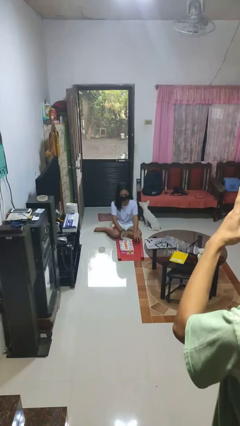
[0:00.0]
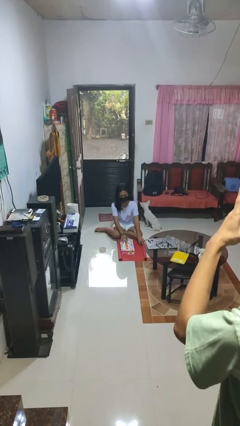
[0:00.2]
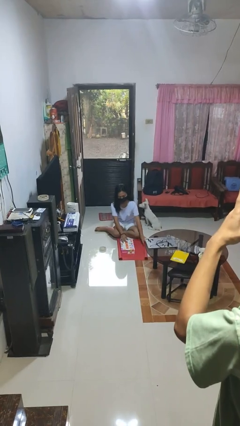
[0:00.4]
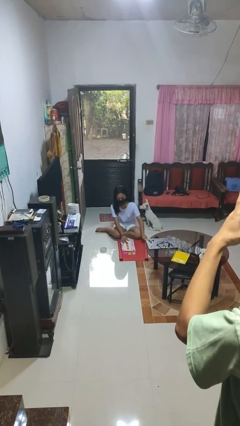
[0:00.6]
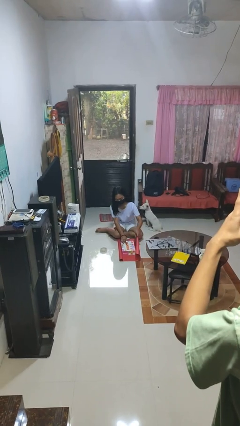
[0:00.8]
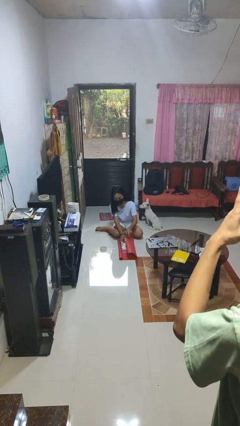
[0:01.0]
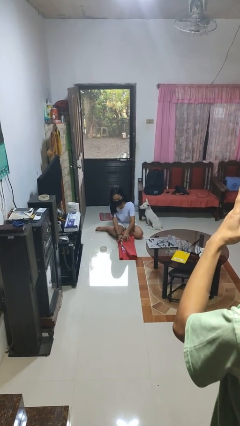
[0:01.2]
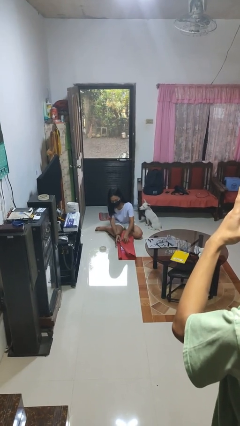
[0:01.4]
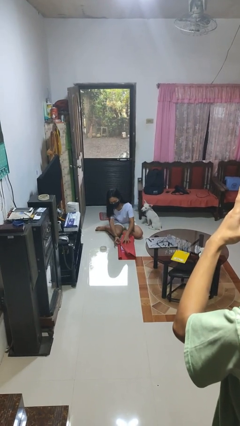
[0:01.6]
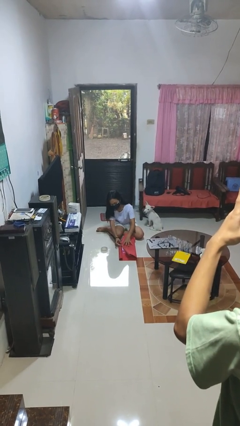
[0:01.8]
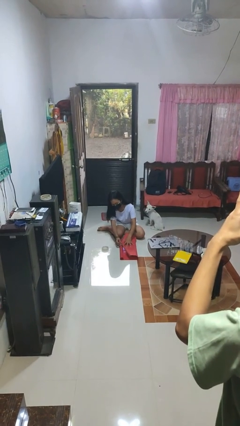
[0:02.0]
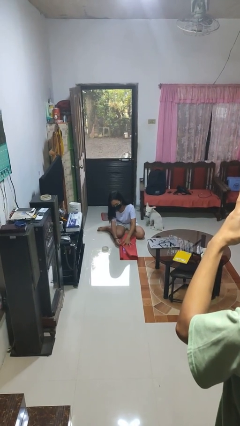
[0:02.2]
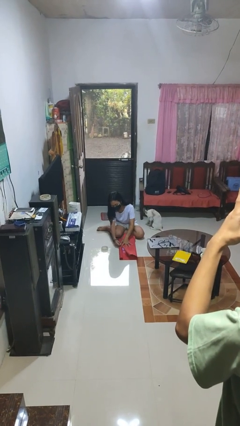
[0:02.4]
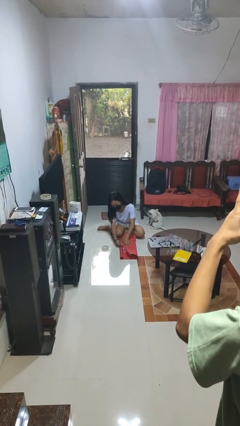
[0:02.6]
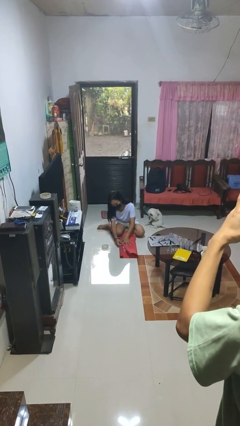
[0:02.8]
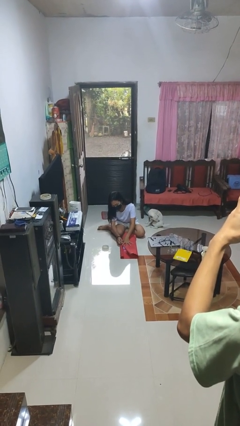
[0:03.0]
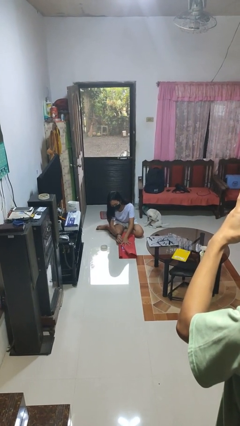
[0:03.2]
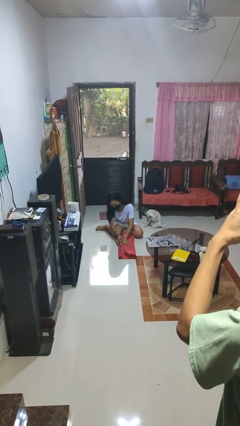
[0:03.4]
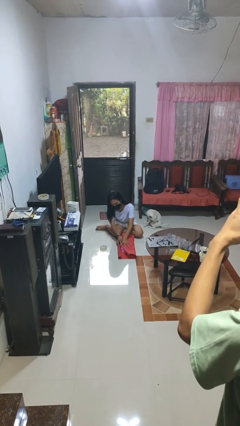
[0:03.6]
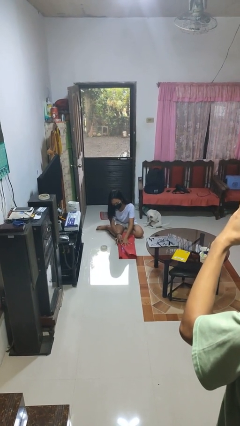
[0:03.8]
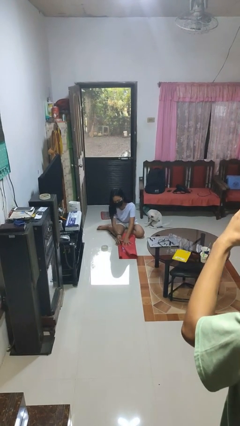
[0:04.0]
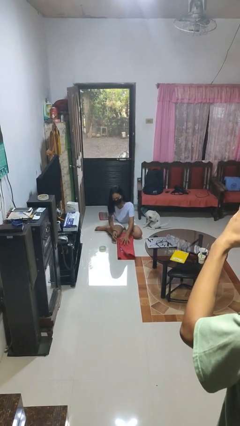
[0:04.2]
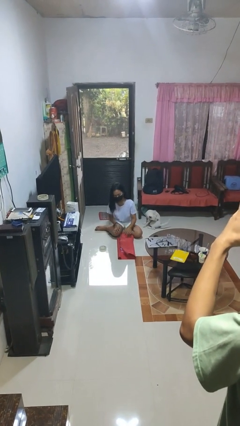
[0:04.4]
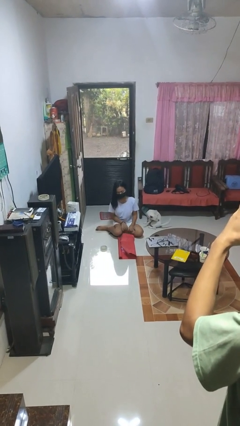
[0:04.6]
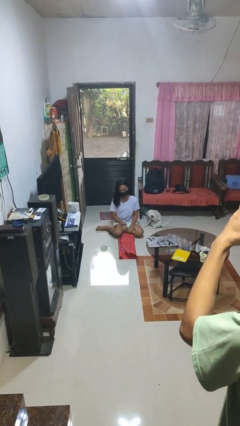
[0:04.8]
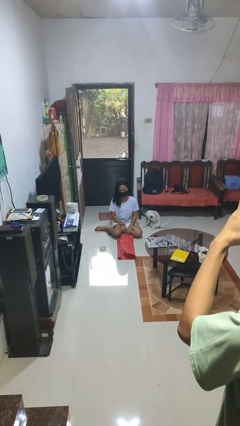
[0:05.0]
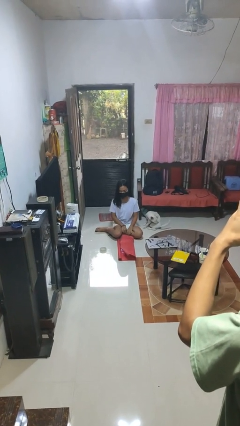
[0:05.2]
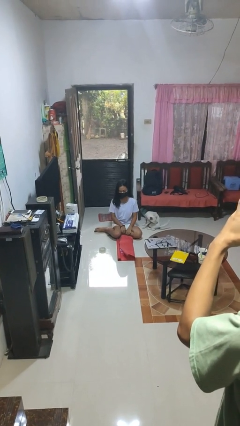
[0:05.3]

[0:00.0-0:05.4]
person wraps box

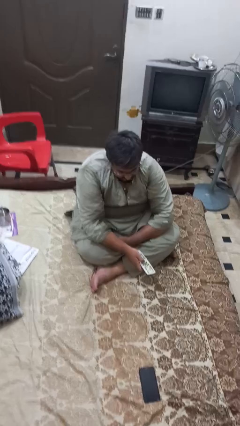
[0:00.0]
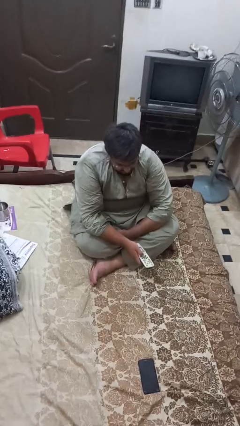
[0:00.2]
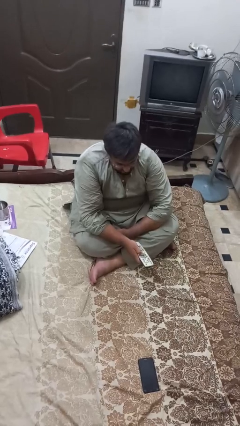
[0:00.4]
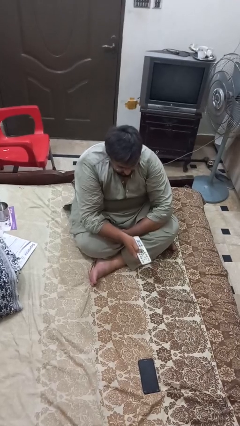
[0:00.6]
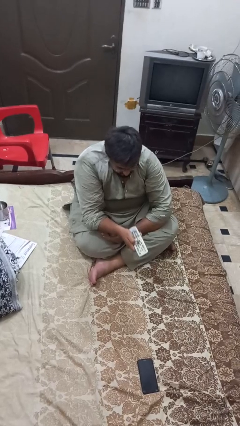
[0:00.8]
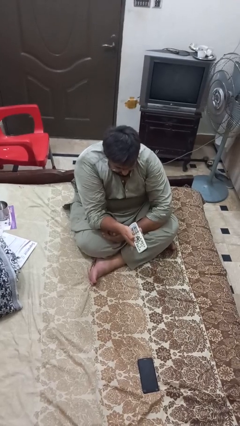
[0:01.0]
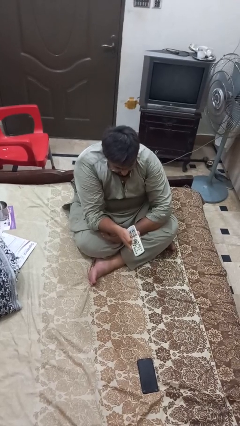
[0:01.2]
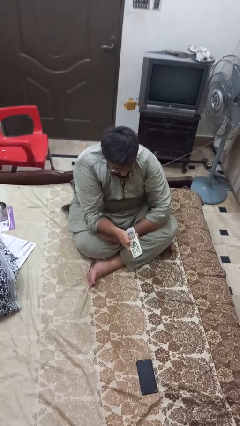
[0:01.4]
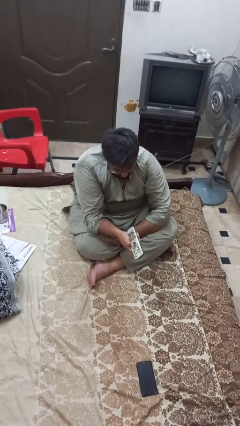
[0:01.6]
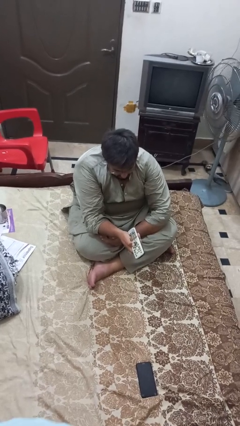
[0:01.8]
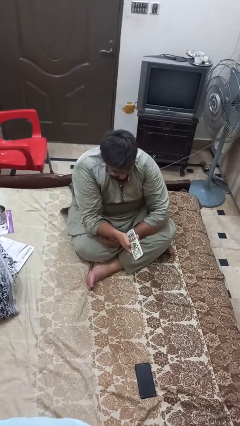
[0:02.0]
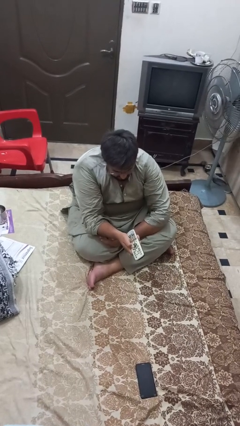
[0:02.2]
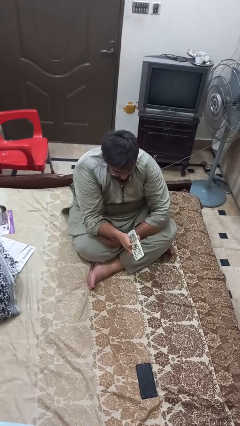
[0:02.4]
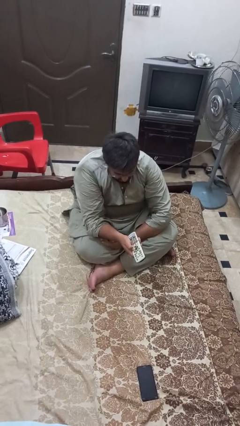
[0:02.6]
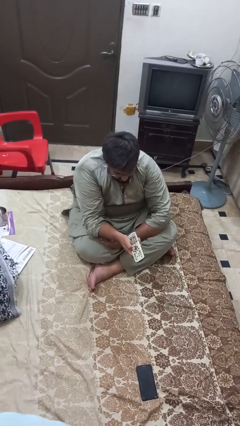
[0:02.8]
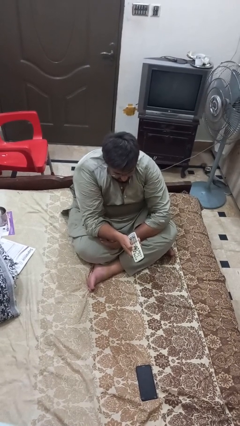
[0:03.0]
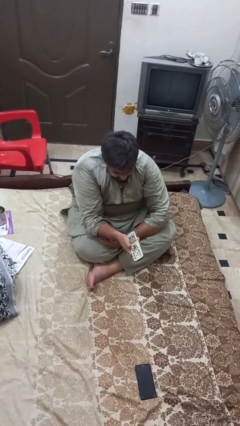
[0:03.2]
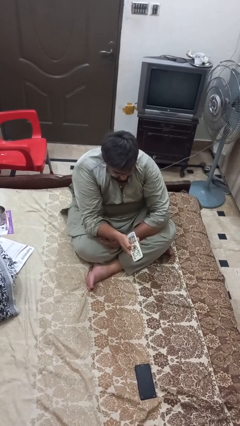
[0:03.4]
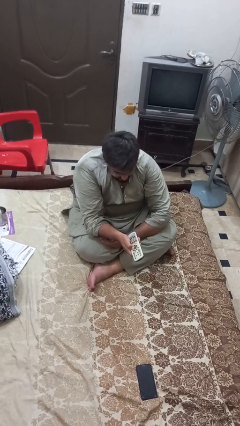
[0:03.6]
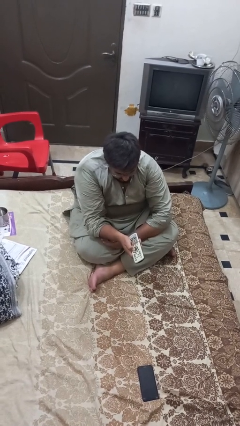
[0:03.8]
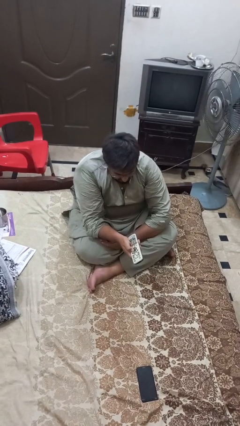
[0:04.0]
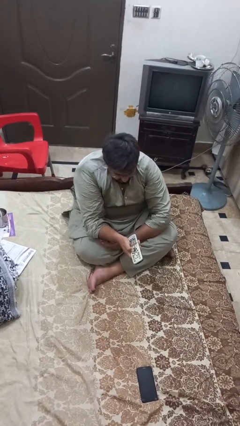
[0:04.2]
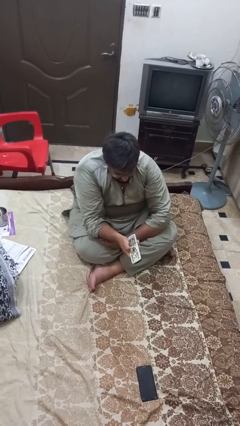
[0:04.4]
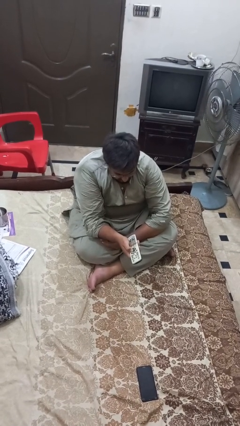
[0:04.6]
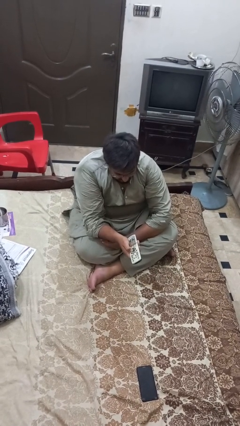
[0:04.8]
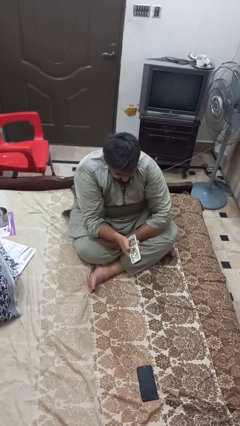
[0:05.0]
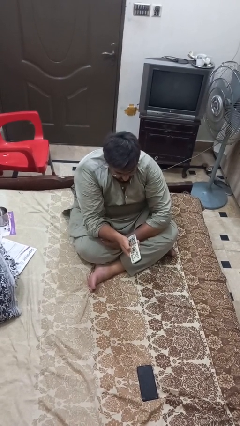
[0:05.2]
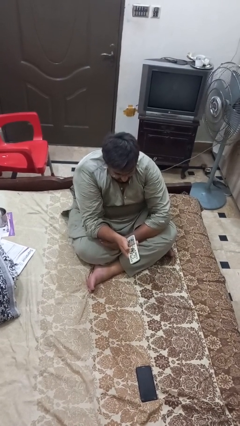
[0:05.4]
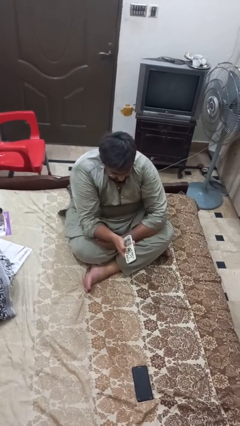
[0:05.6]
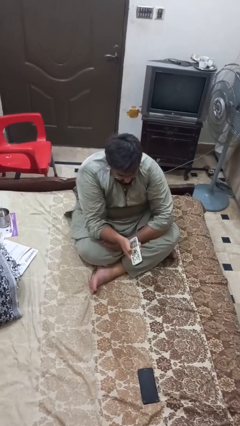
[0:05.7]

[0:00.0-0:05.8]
person uses television remote

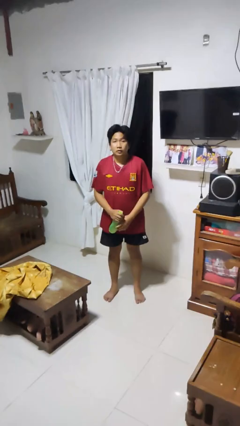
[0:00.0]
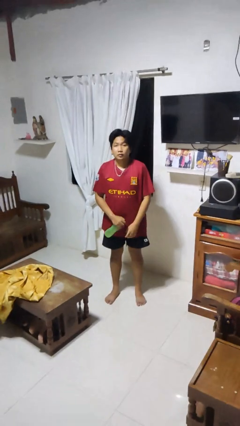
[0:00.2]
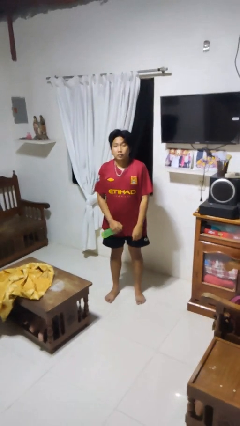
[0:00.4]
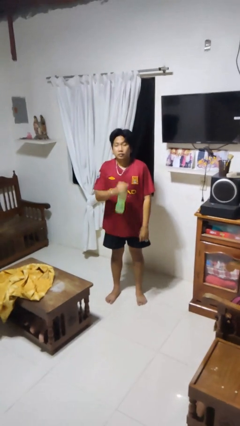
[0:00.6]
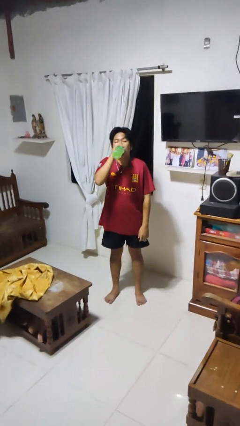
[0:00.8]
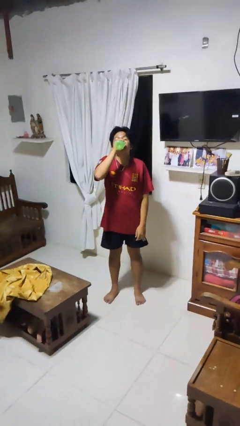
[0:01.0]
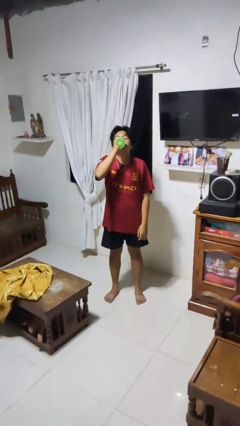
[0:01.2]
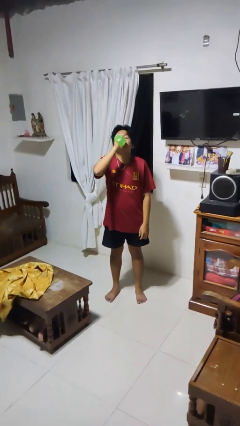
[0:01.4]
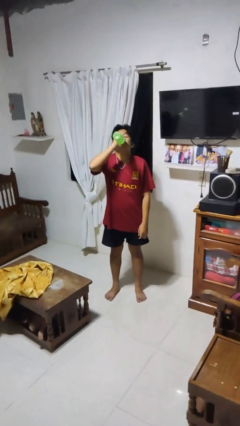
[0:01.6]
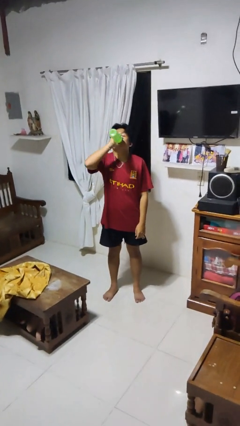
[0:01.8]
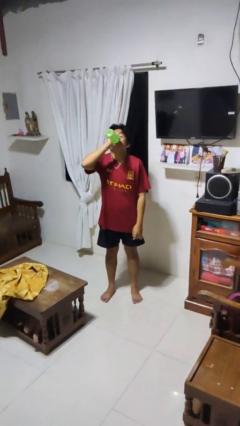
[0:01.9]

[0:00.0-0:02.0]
person drinks from bottle

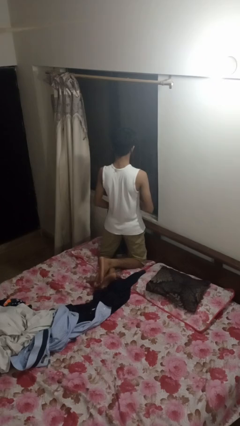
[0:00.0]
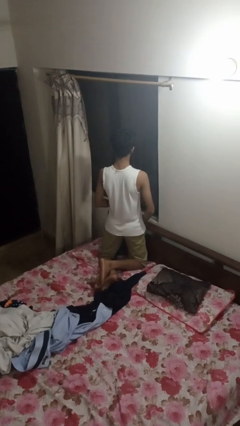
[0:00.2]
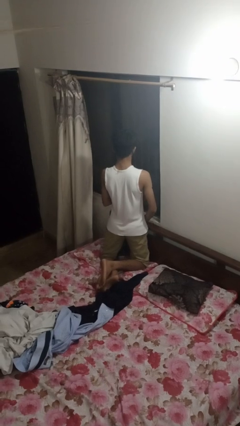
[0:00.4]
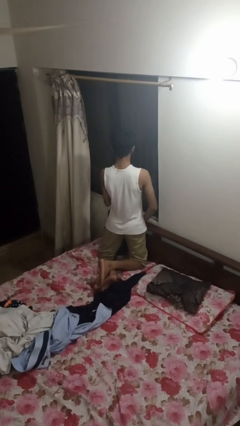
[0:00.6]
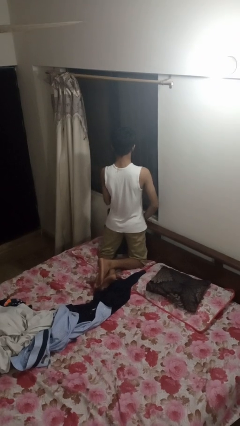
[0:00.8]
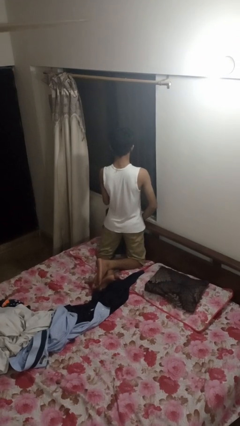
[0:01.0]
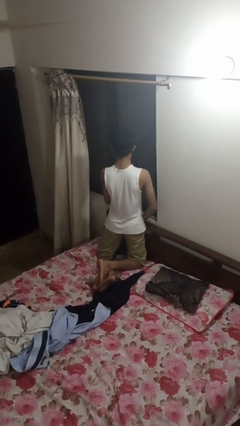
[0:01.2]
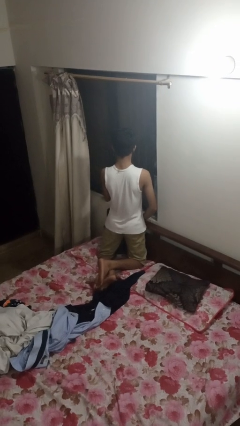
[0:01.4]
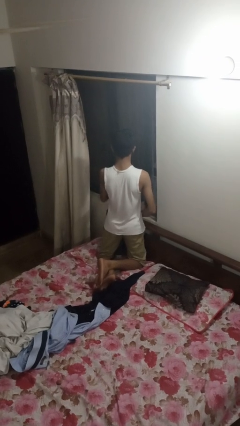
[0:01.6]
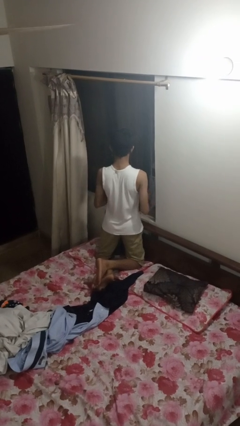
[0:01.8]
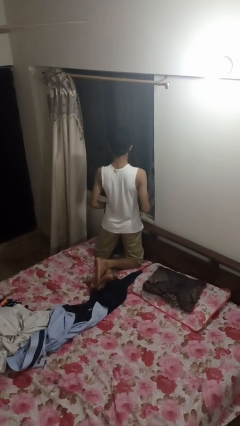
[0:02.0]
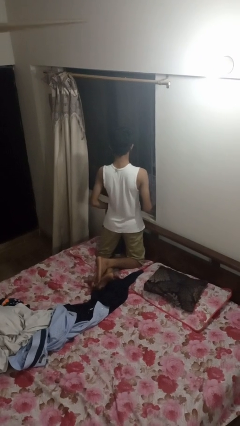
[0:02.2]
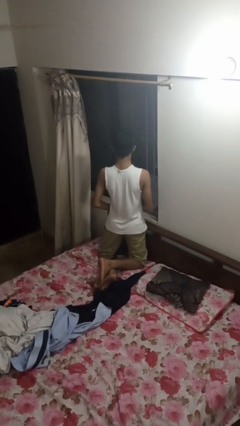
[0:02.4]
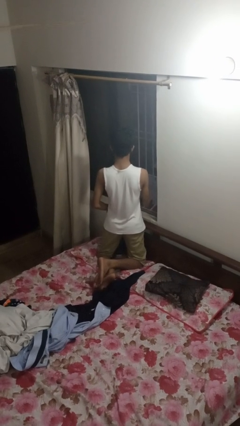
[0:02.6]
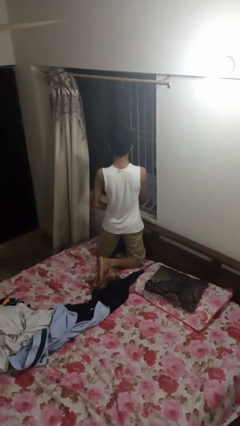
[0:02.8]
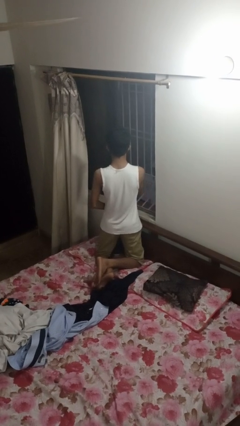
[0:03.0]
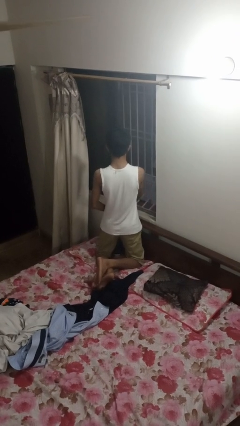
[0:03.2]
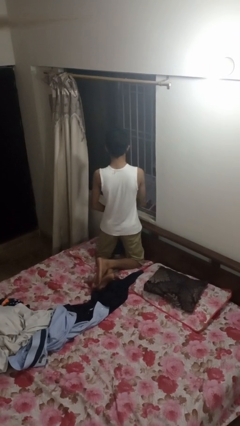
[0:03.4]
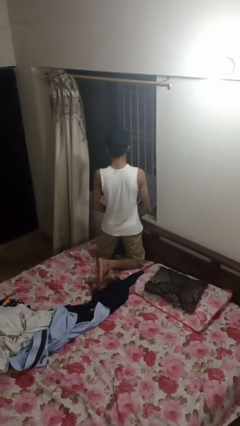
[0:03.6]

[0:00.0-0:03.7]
person opens home window

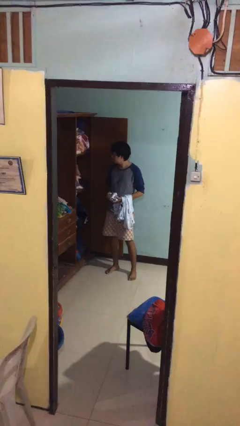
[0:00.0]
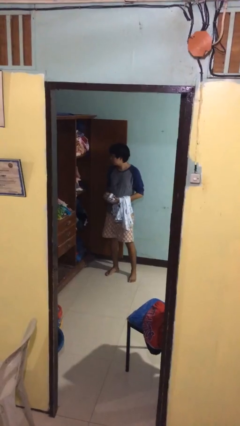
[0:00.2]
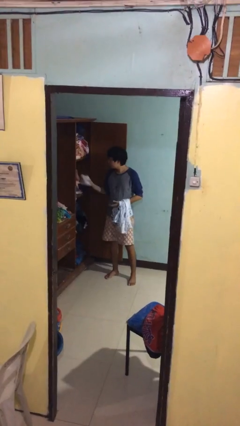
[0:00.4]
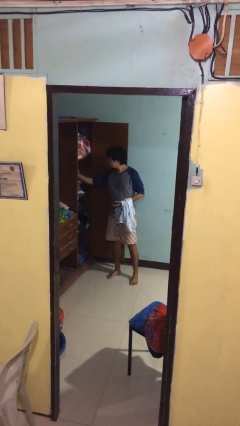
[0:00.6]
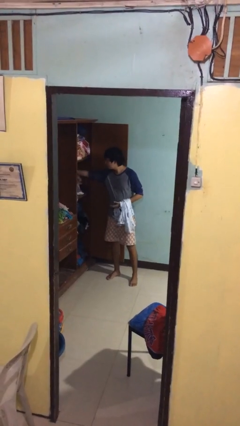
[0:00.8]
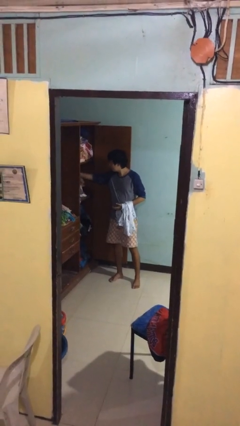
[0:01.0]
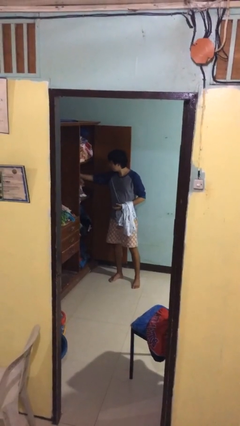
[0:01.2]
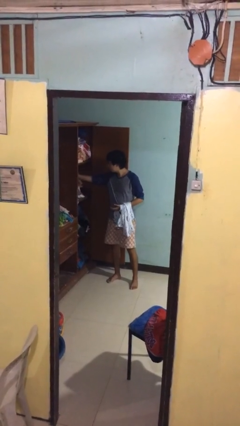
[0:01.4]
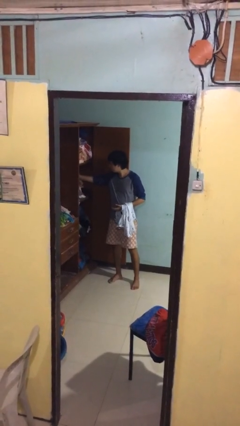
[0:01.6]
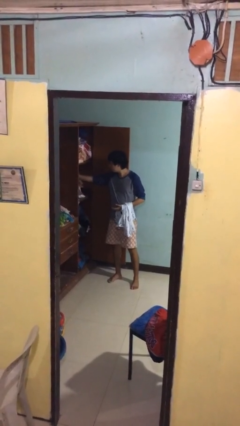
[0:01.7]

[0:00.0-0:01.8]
person puts clothes into dresser
